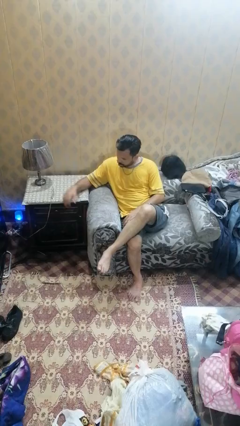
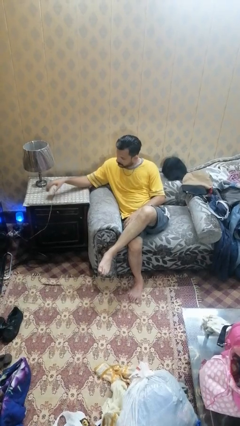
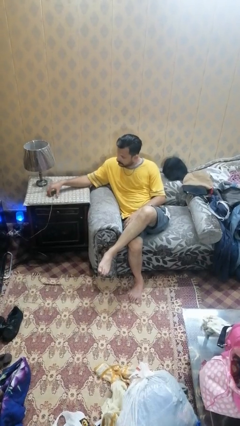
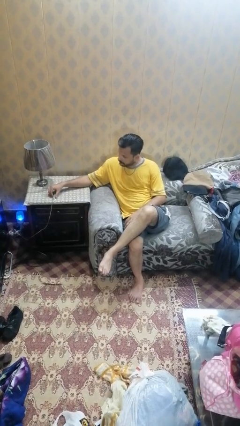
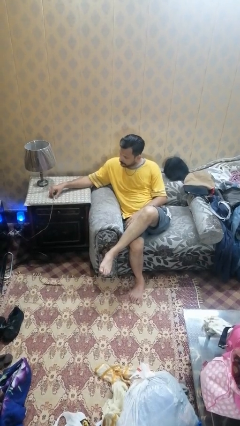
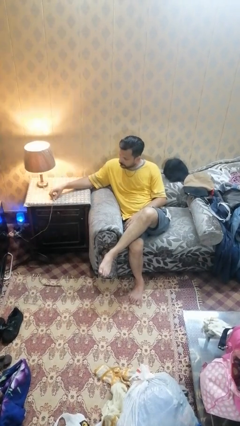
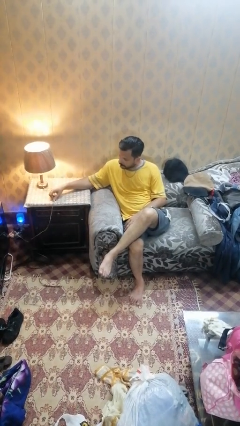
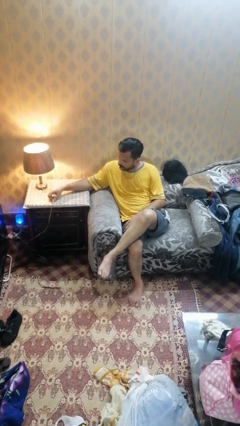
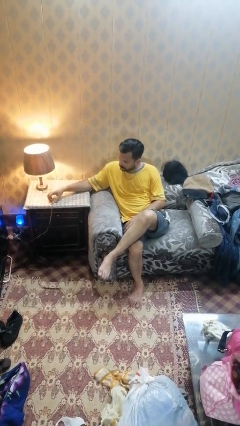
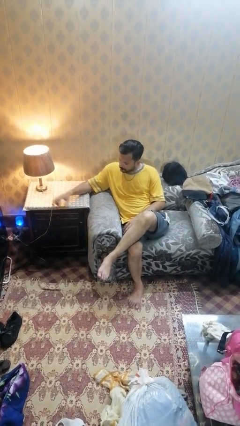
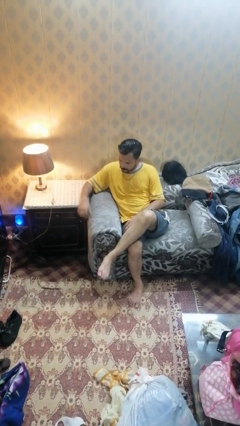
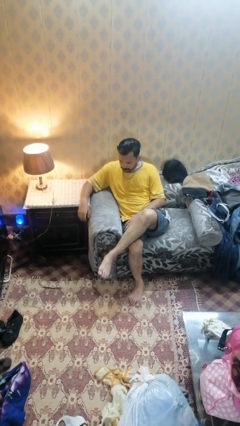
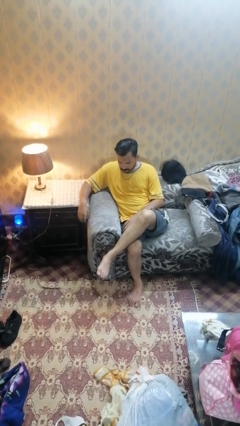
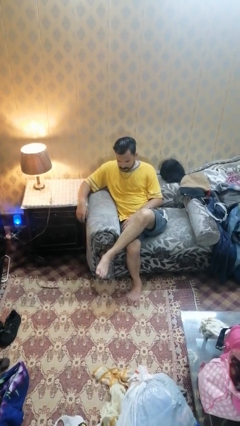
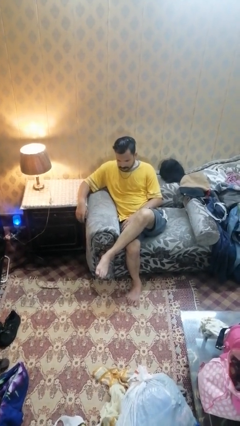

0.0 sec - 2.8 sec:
person turns on lamp

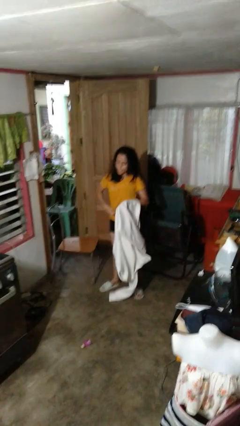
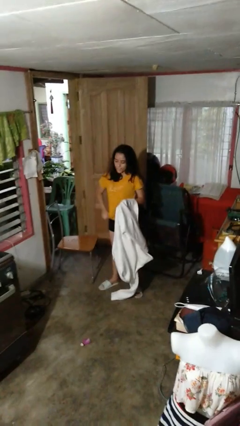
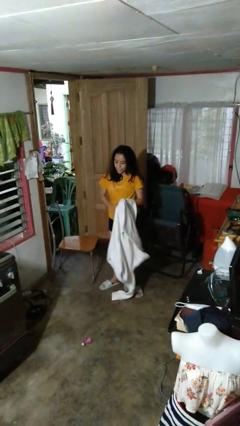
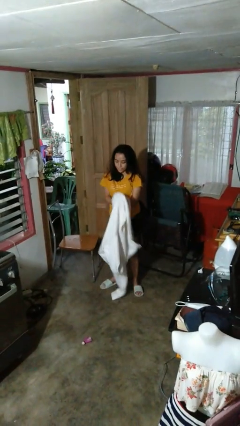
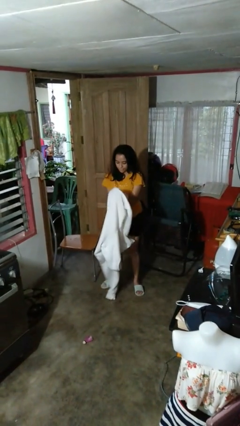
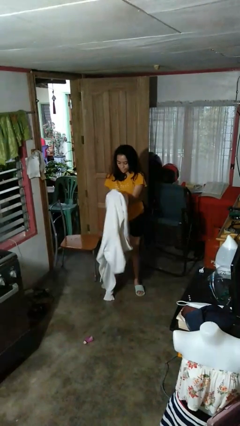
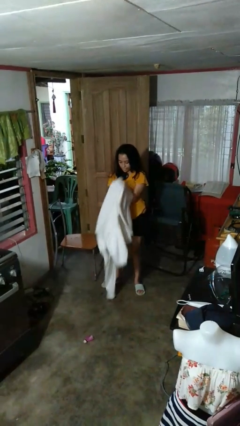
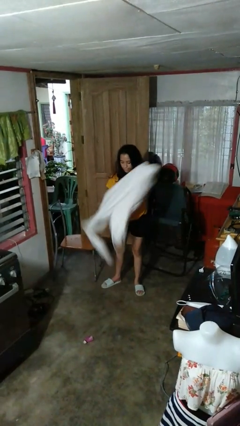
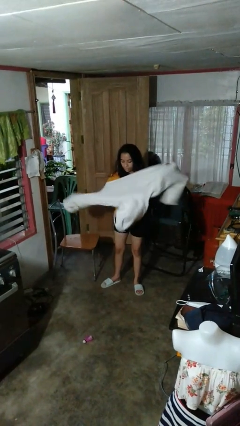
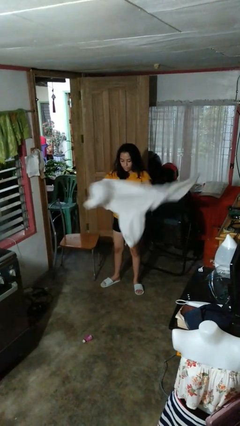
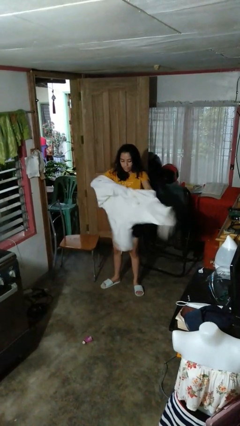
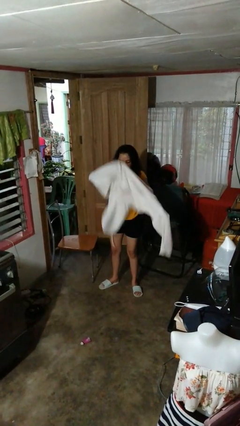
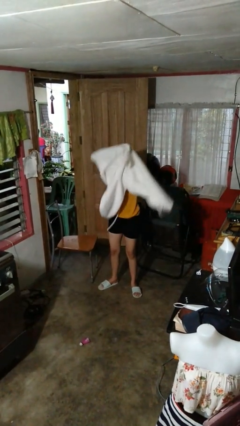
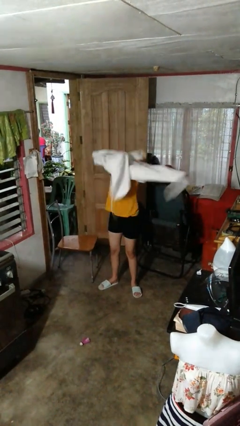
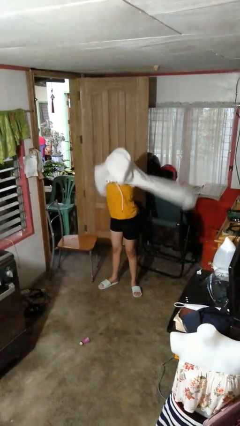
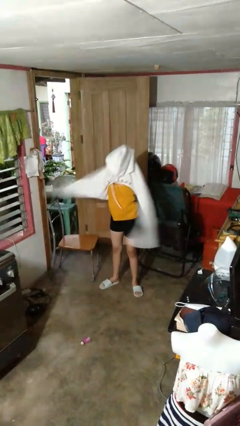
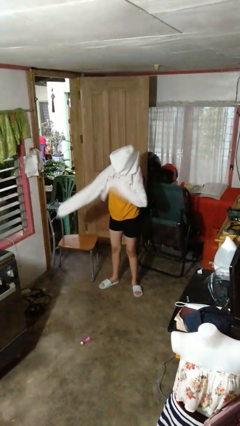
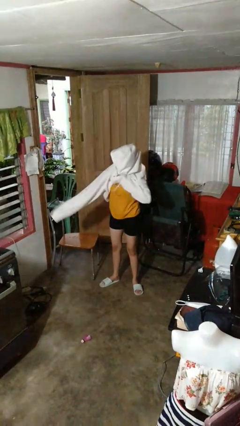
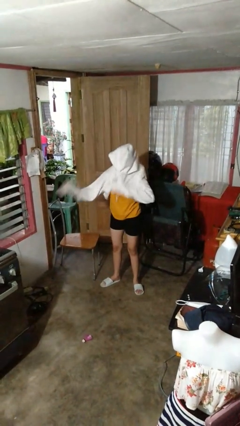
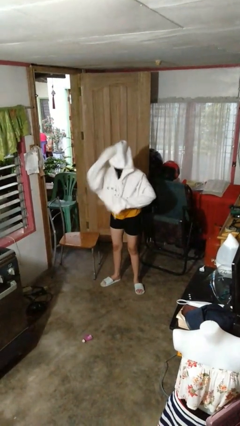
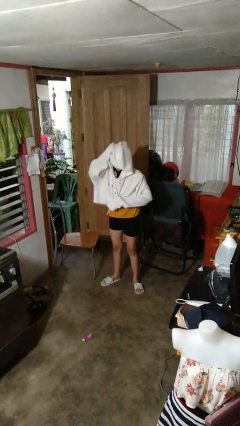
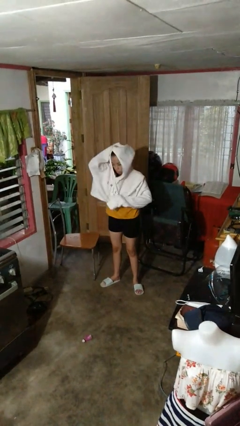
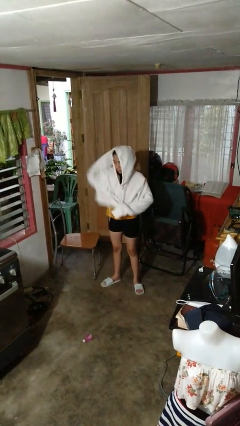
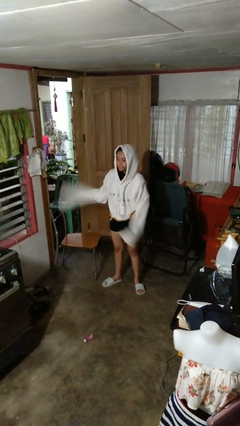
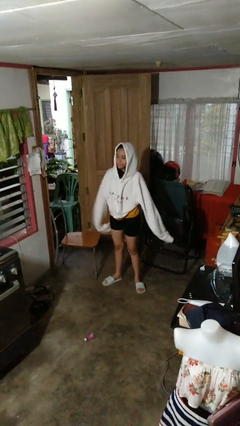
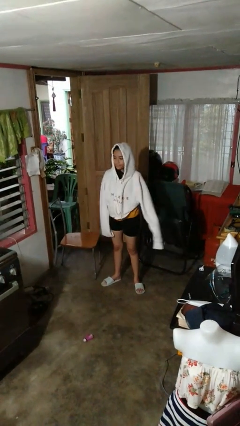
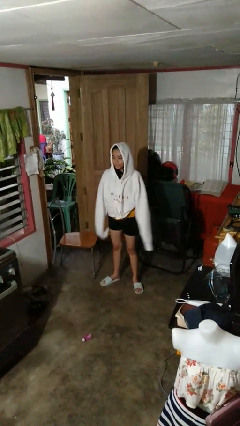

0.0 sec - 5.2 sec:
person puts on hoodie

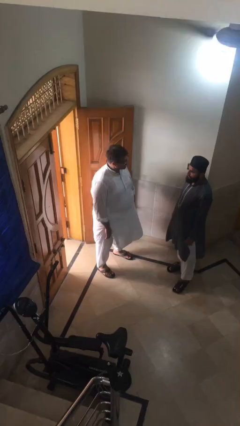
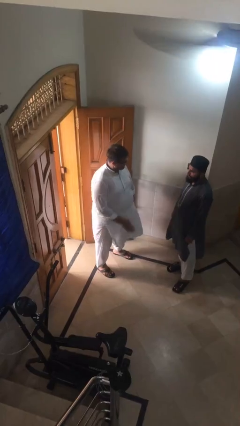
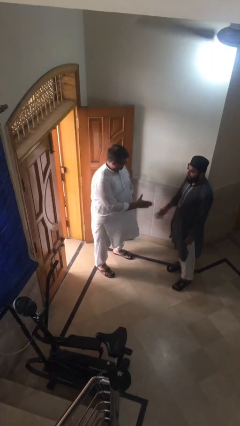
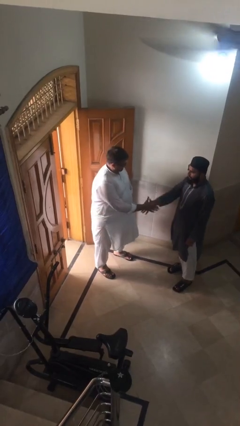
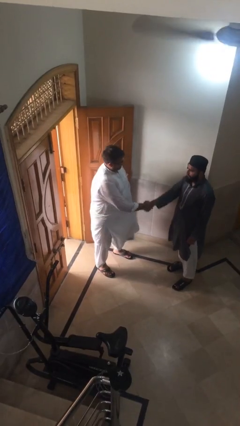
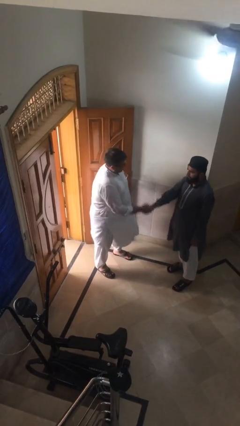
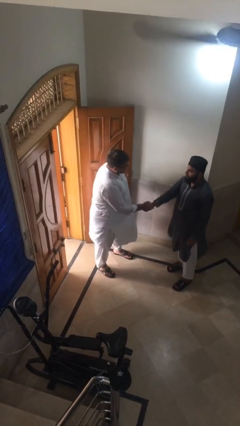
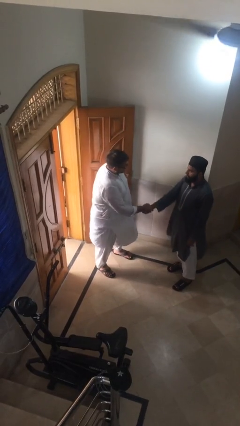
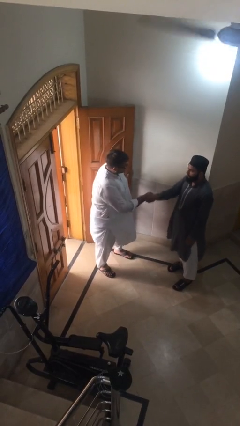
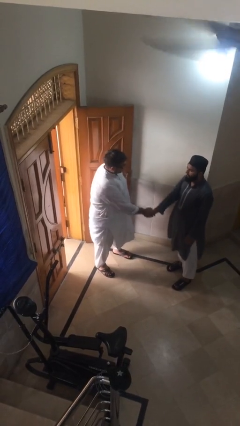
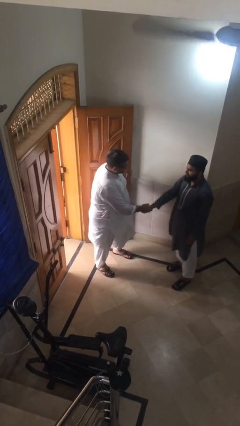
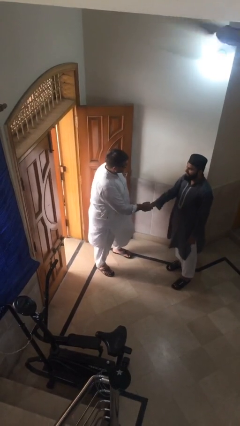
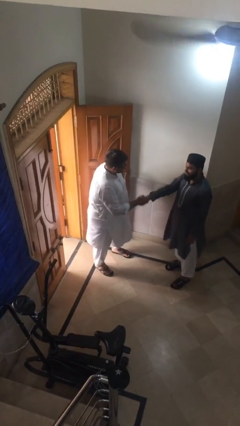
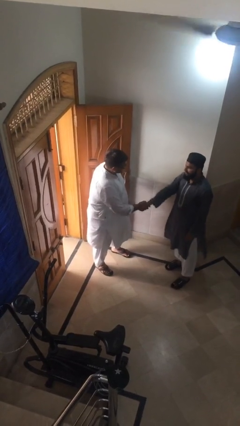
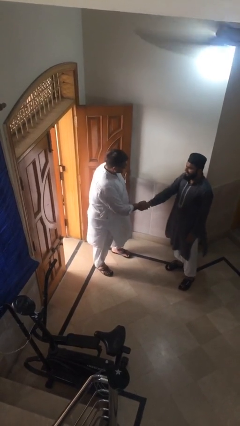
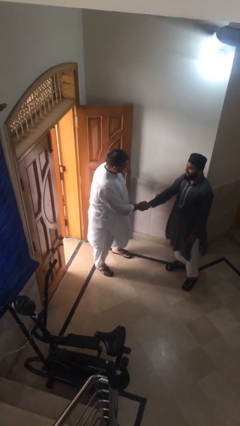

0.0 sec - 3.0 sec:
person shakes hand

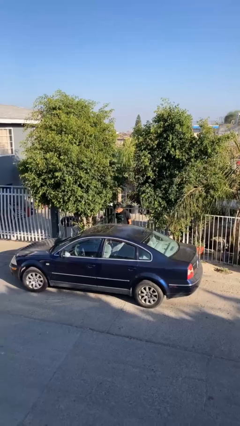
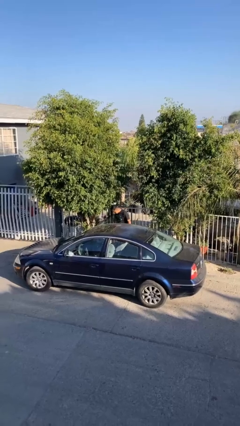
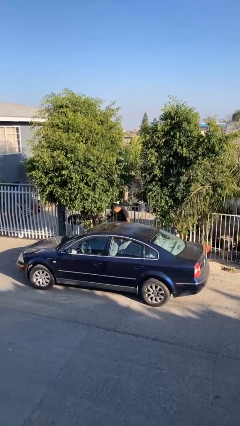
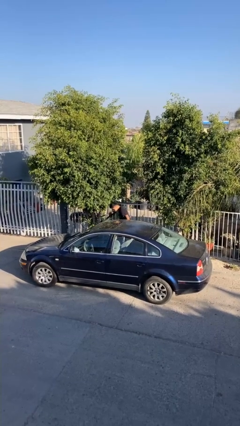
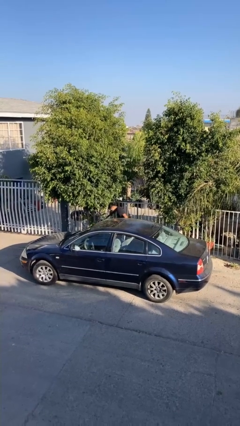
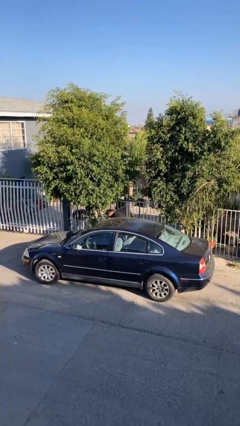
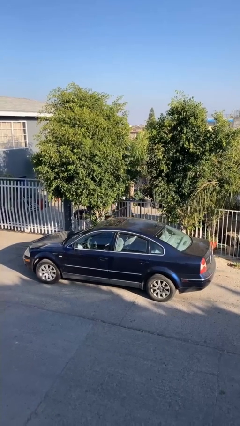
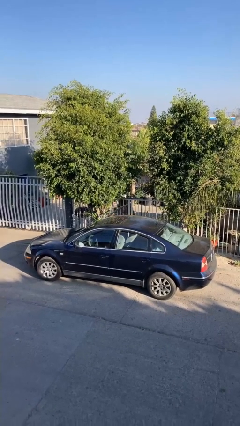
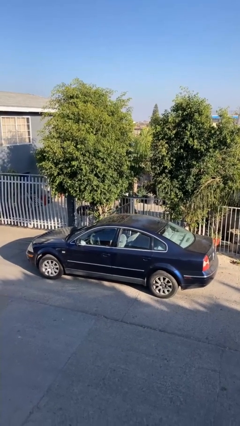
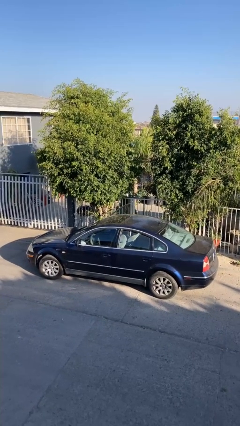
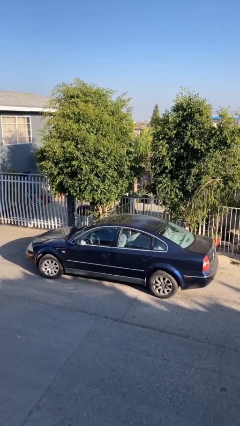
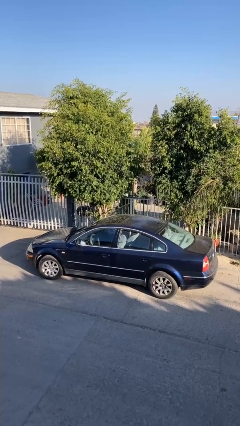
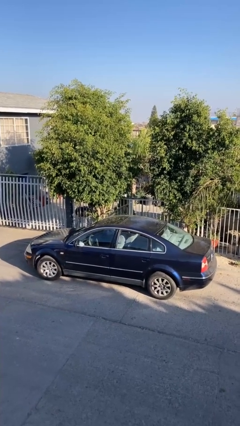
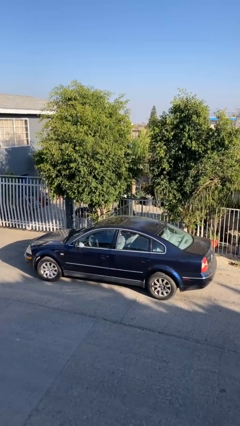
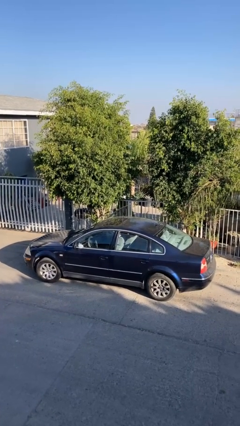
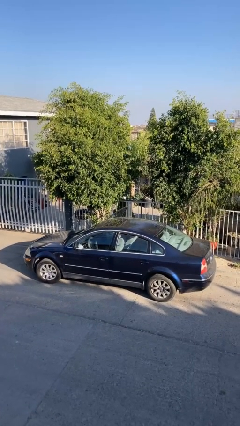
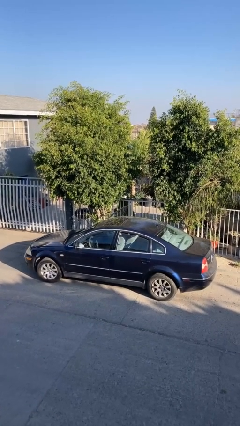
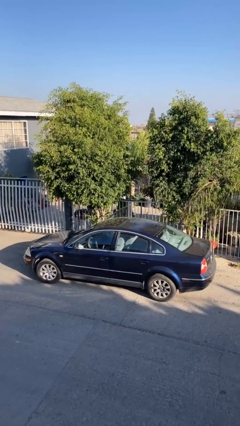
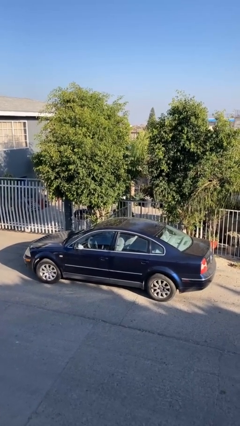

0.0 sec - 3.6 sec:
person enters car

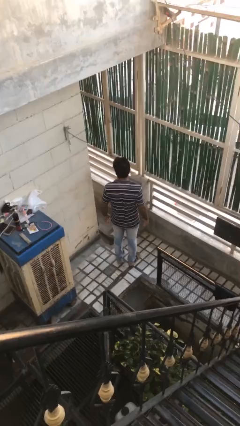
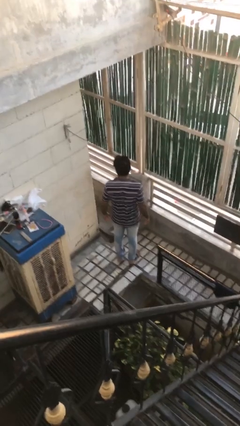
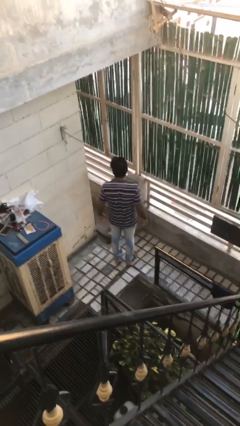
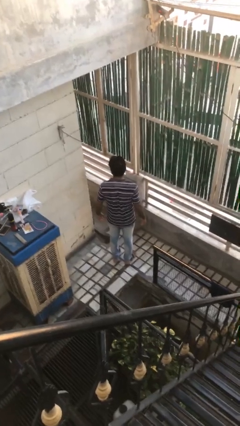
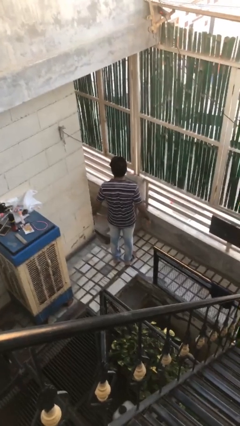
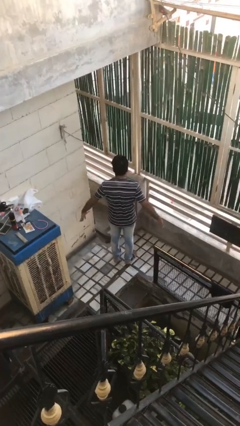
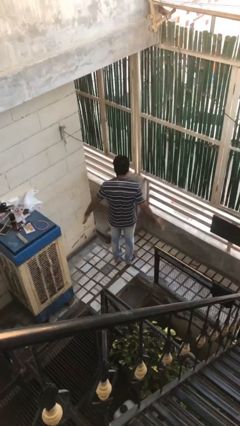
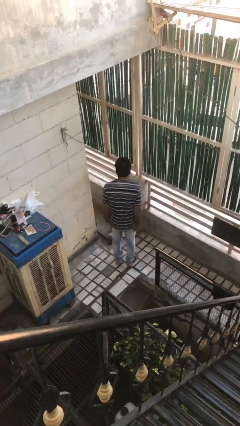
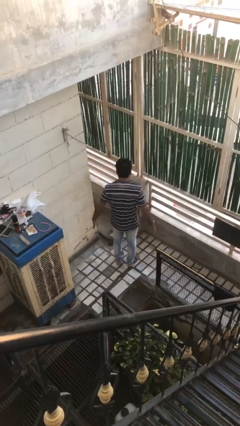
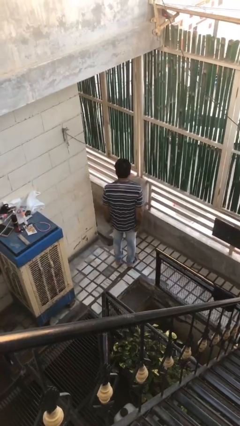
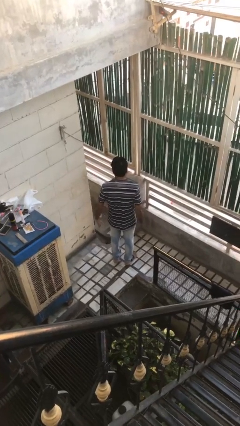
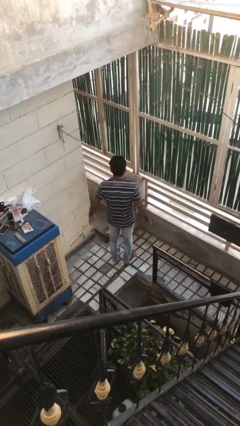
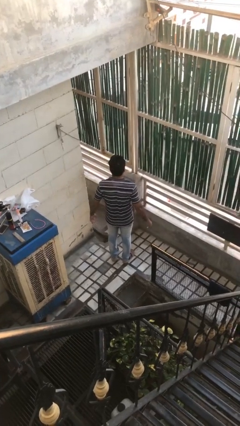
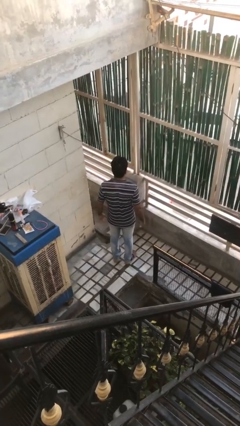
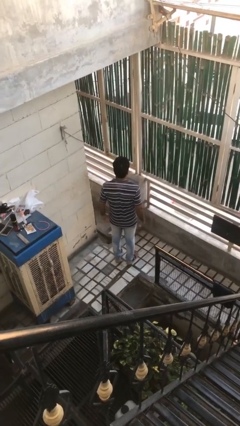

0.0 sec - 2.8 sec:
person slaps hands on thighs

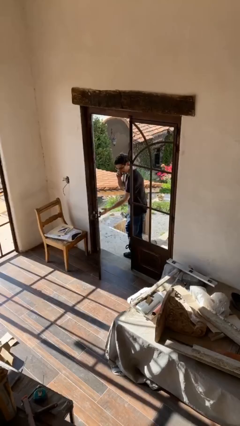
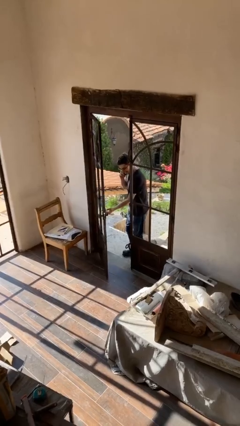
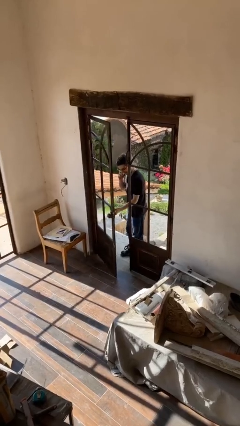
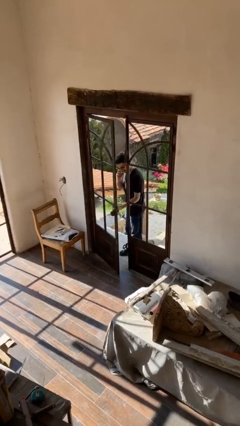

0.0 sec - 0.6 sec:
person closes facility door
